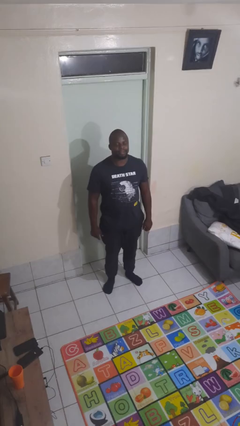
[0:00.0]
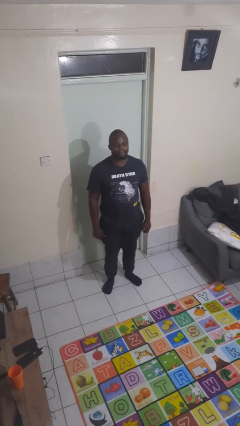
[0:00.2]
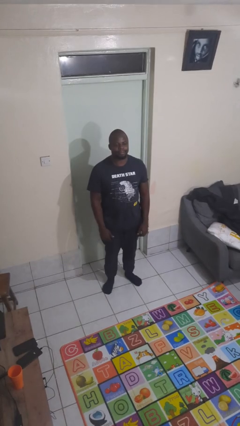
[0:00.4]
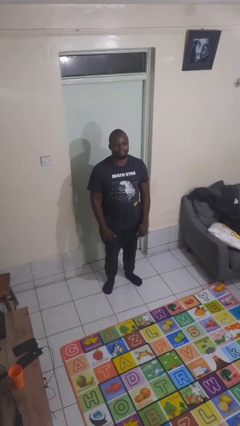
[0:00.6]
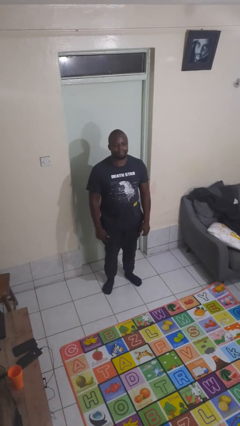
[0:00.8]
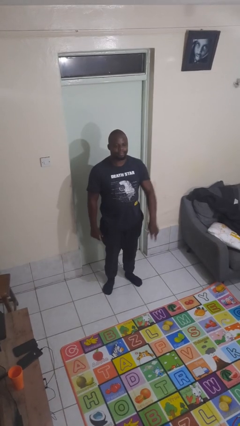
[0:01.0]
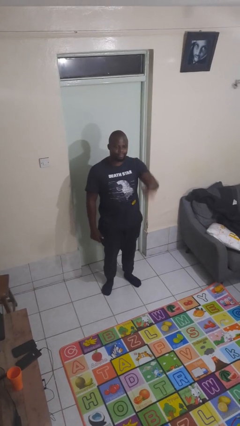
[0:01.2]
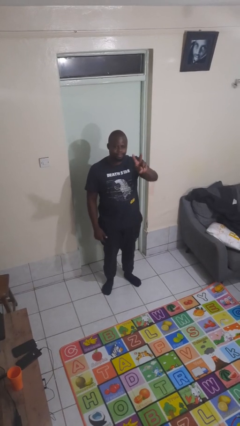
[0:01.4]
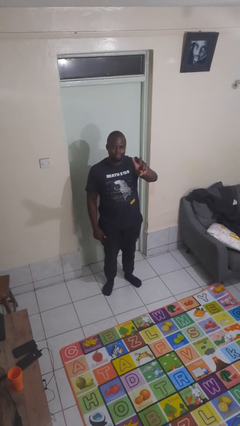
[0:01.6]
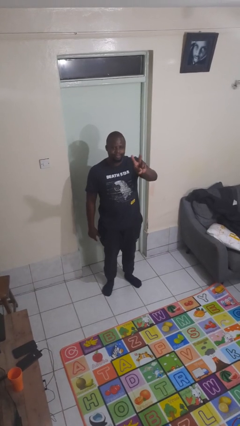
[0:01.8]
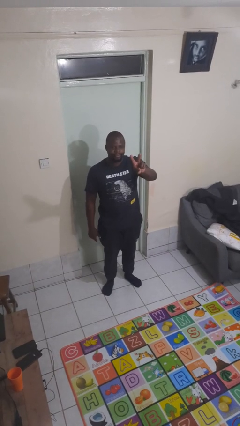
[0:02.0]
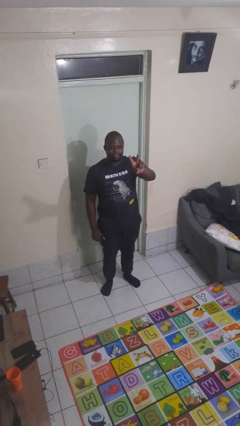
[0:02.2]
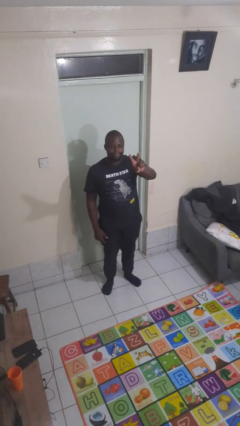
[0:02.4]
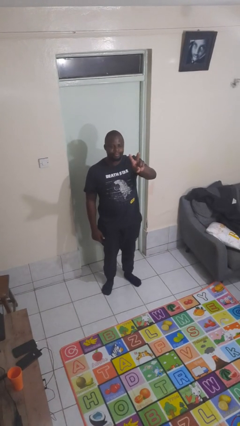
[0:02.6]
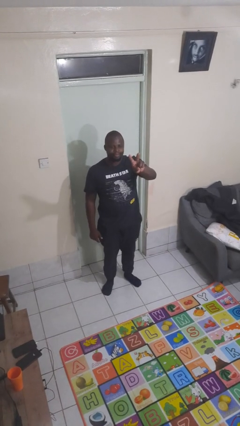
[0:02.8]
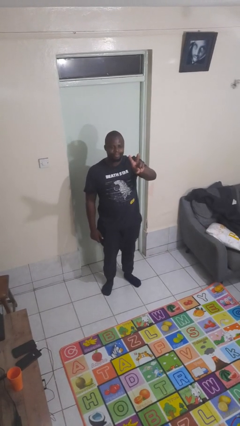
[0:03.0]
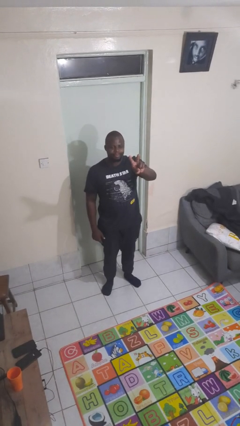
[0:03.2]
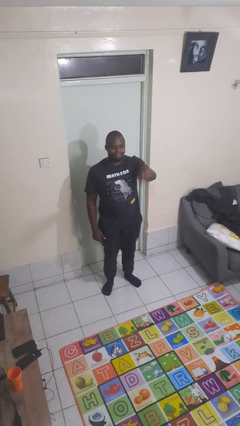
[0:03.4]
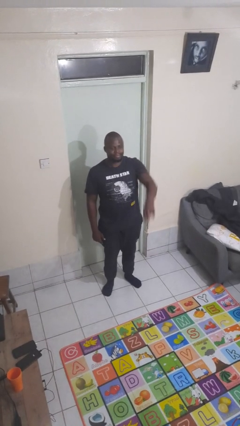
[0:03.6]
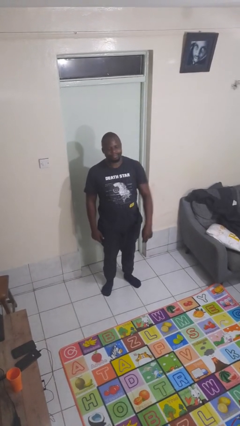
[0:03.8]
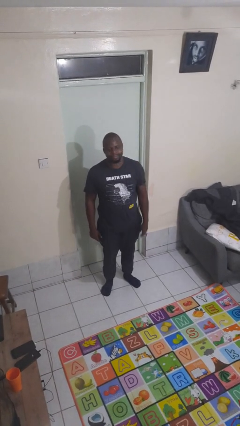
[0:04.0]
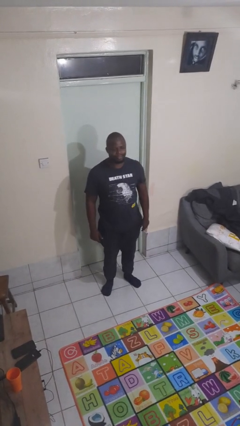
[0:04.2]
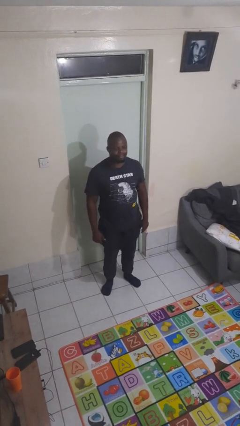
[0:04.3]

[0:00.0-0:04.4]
person gestures peace

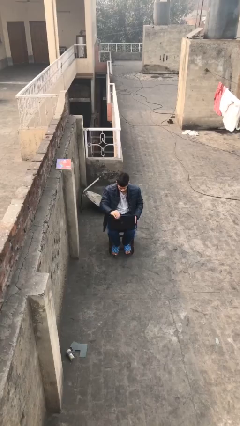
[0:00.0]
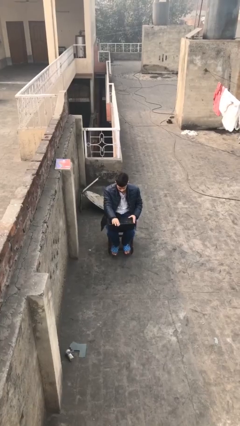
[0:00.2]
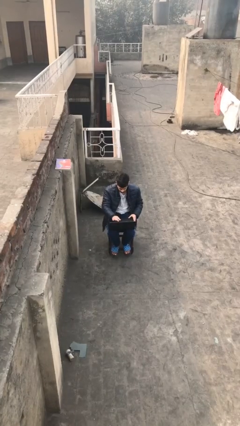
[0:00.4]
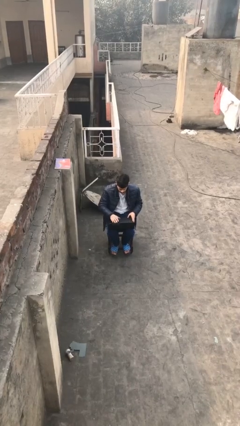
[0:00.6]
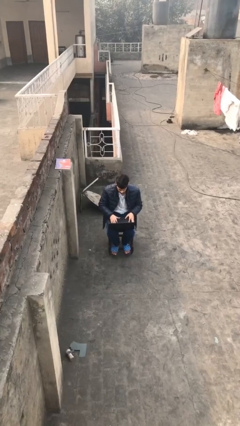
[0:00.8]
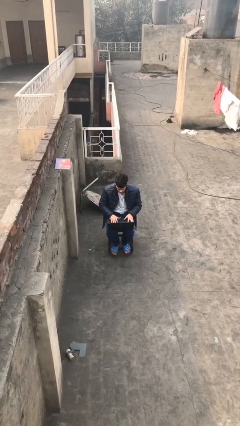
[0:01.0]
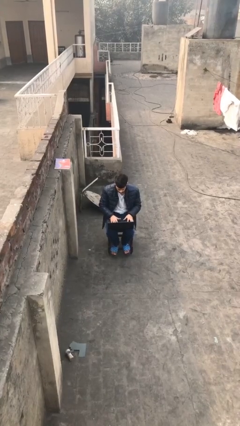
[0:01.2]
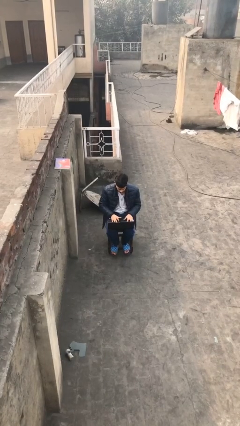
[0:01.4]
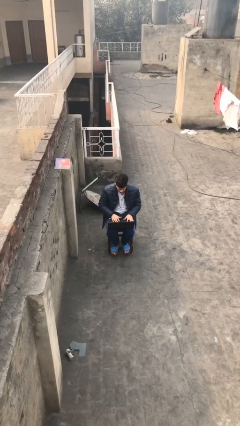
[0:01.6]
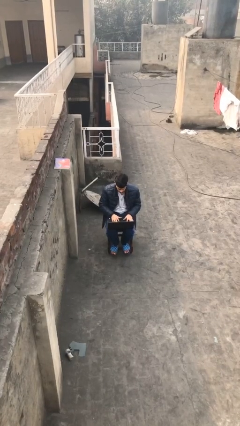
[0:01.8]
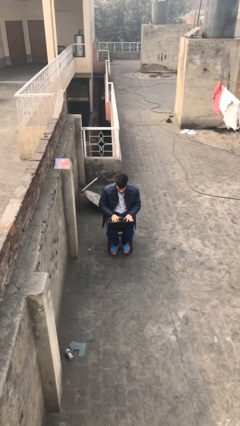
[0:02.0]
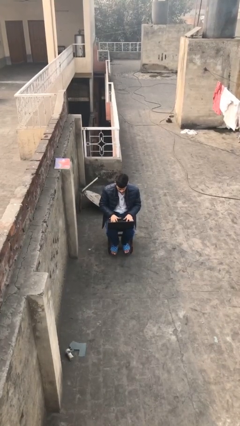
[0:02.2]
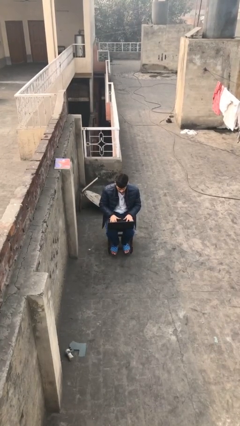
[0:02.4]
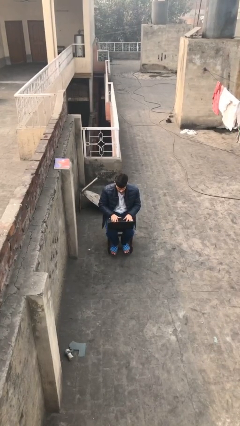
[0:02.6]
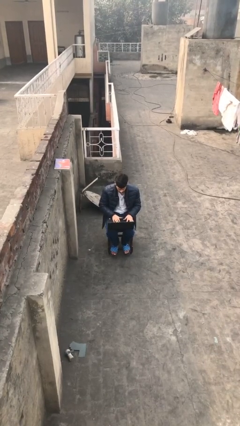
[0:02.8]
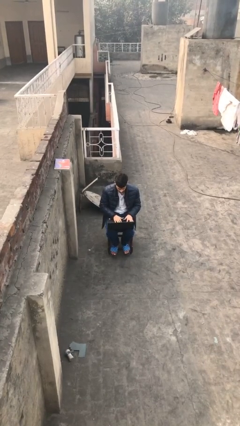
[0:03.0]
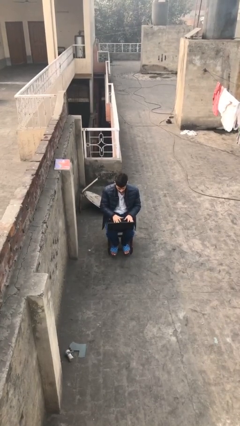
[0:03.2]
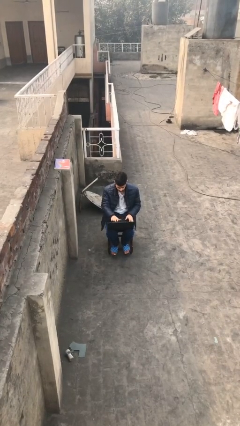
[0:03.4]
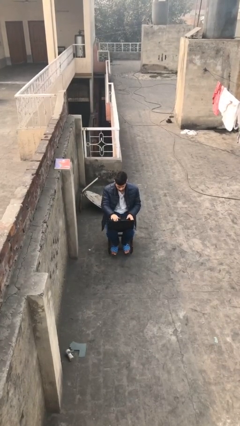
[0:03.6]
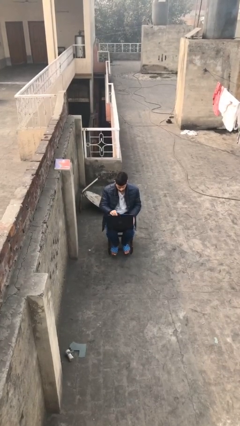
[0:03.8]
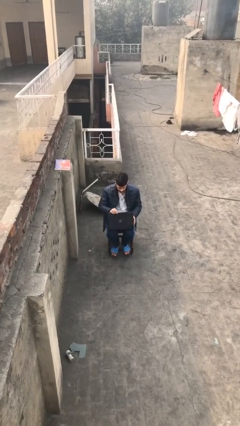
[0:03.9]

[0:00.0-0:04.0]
person interacts with laptop

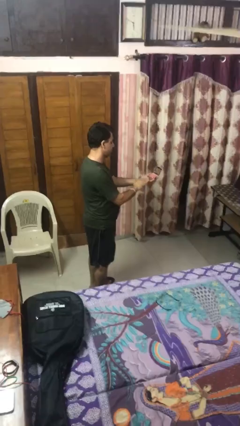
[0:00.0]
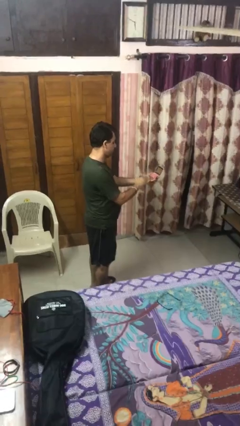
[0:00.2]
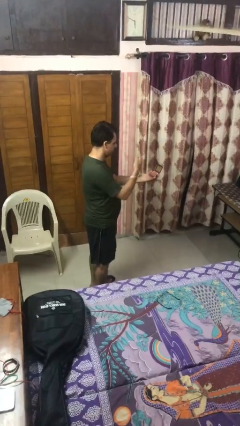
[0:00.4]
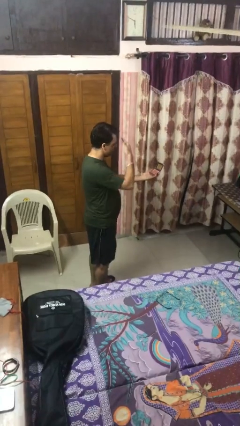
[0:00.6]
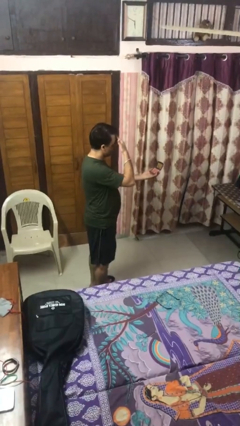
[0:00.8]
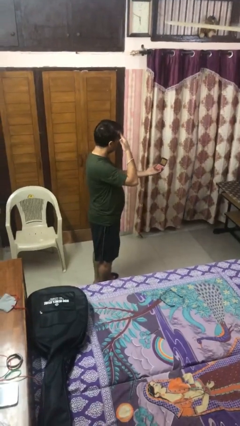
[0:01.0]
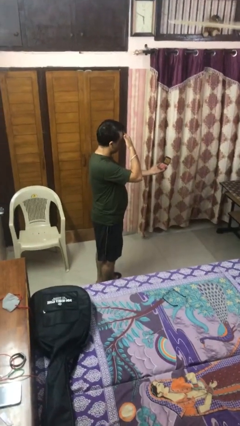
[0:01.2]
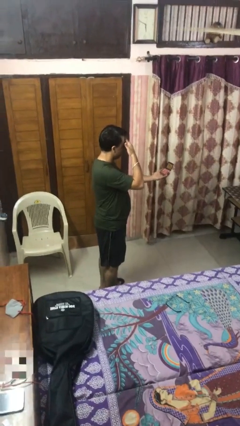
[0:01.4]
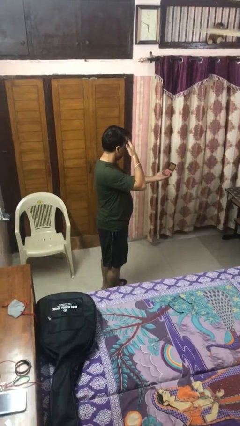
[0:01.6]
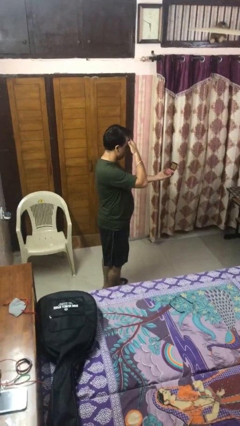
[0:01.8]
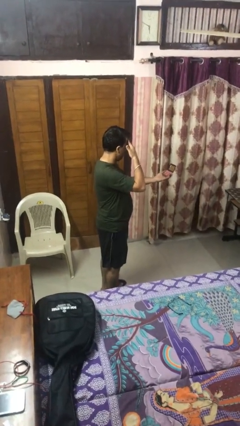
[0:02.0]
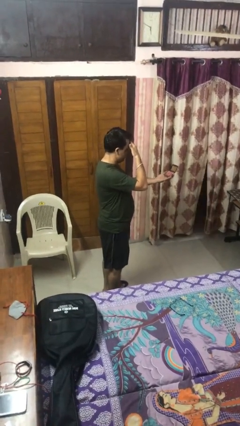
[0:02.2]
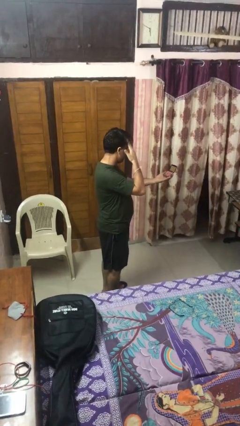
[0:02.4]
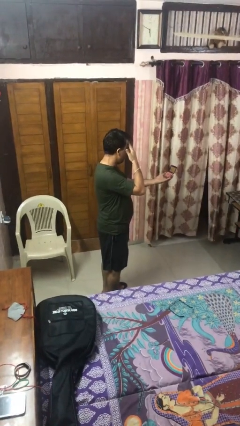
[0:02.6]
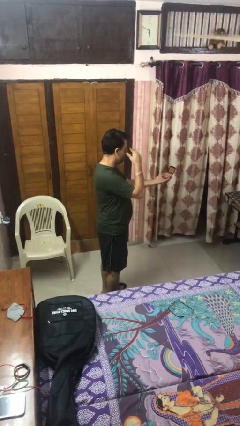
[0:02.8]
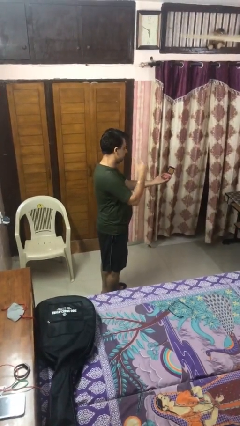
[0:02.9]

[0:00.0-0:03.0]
person applies foundation makeup

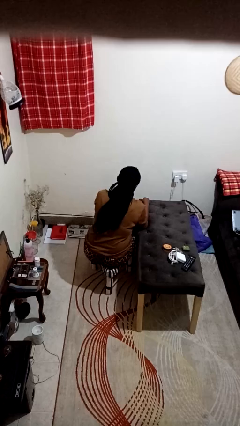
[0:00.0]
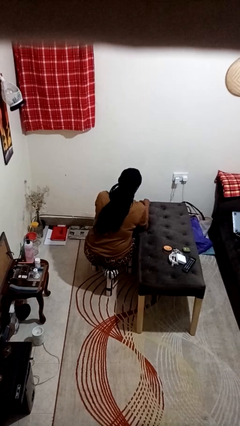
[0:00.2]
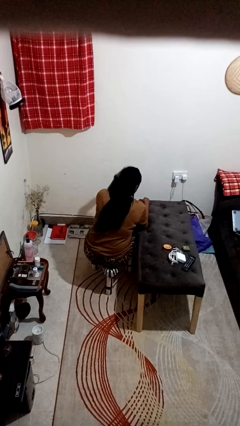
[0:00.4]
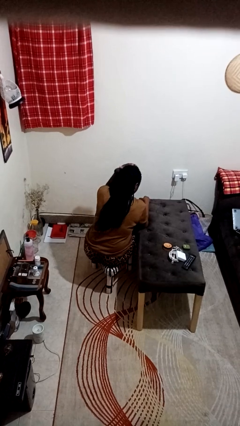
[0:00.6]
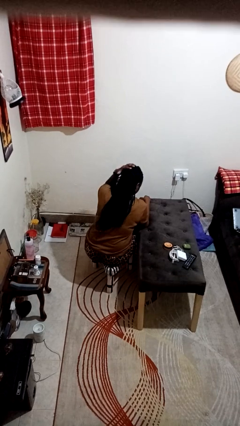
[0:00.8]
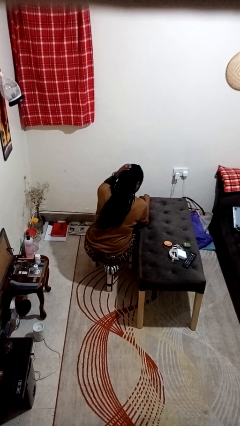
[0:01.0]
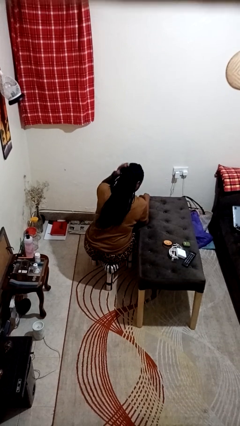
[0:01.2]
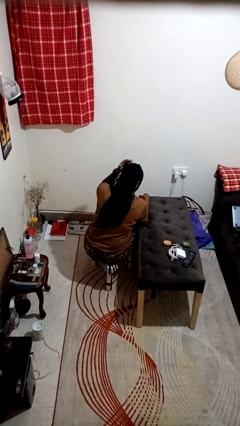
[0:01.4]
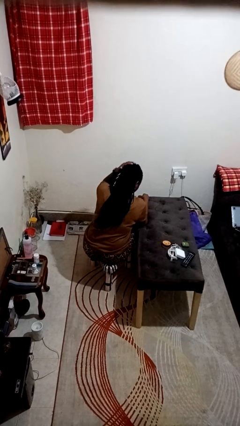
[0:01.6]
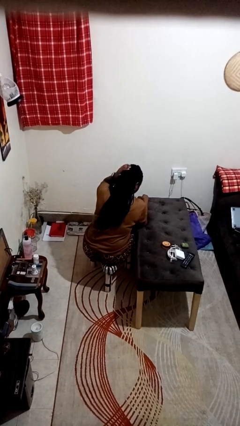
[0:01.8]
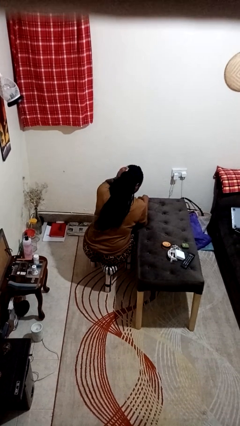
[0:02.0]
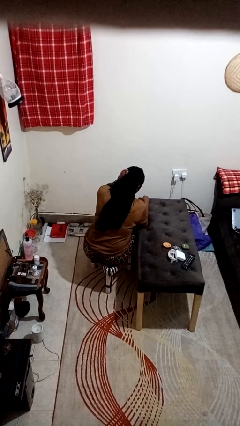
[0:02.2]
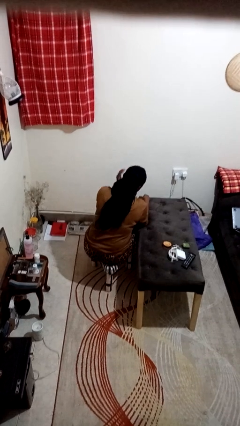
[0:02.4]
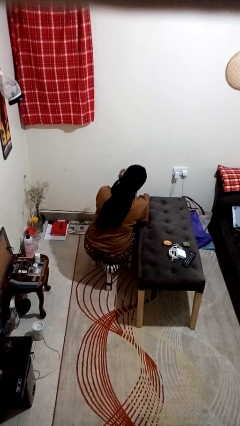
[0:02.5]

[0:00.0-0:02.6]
person strokes hair

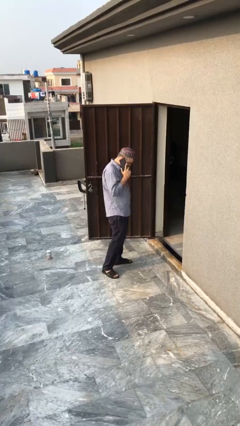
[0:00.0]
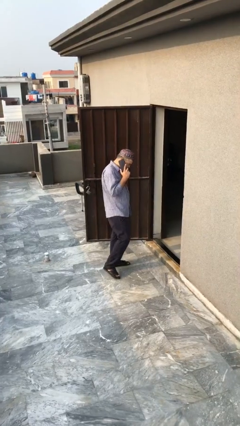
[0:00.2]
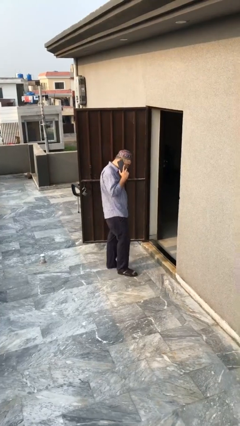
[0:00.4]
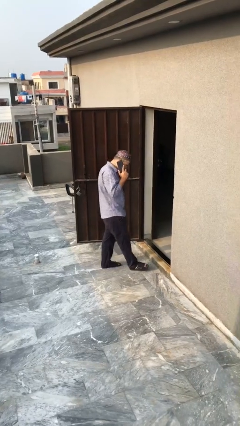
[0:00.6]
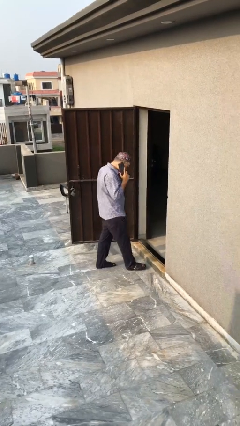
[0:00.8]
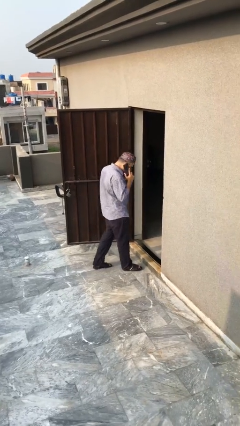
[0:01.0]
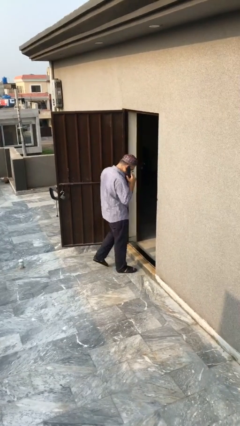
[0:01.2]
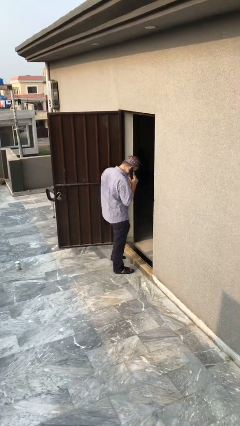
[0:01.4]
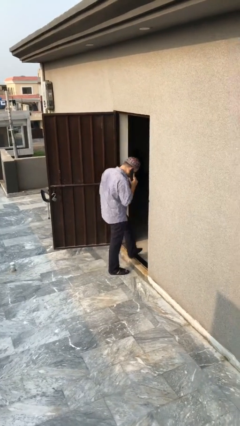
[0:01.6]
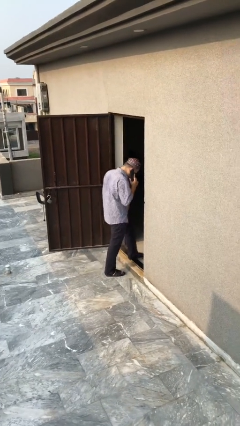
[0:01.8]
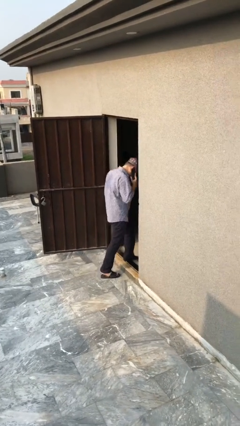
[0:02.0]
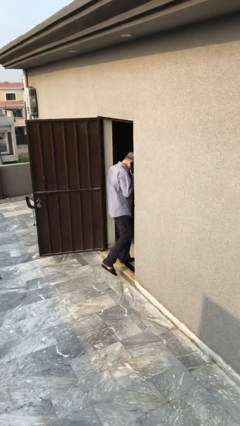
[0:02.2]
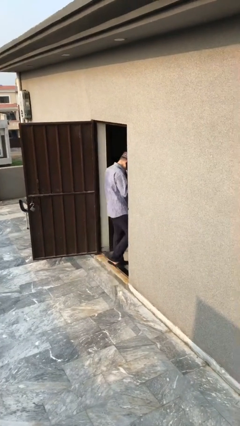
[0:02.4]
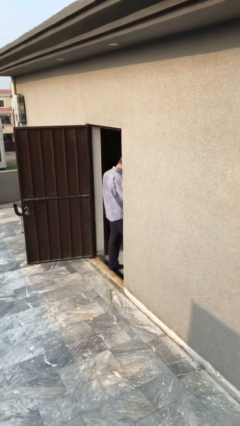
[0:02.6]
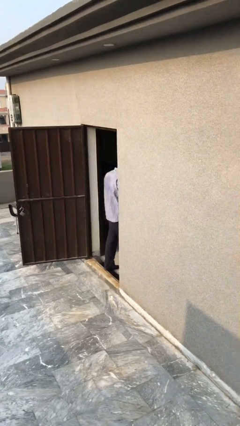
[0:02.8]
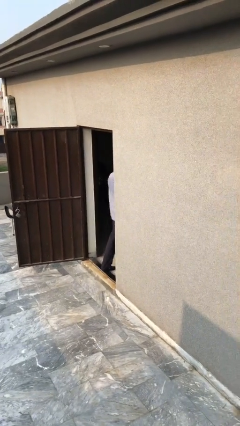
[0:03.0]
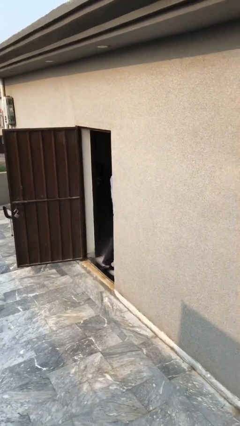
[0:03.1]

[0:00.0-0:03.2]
person exits scene through structure

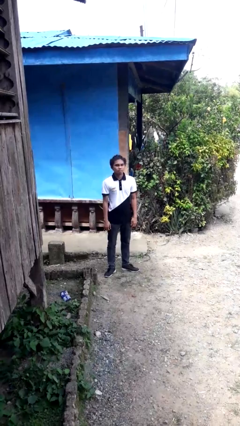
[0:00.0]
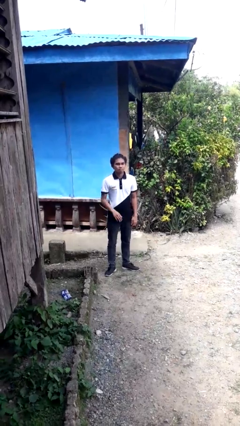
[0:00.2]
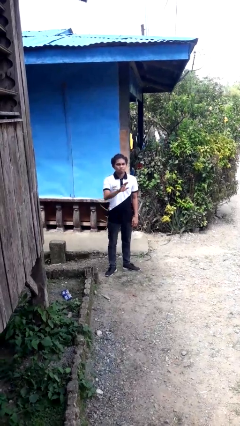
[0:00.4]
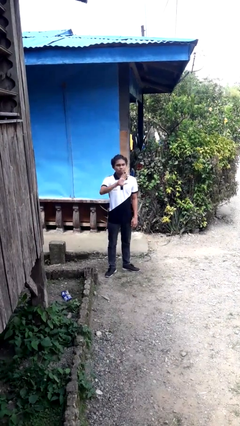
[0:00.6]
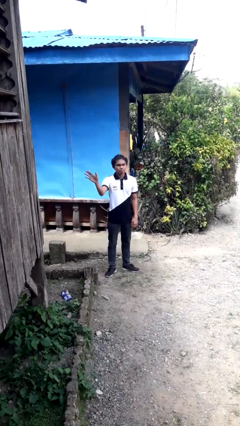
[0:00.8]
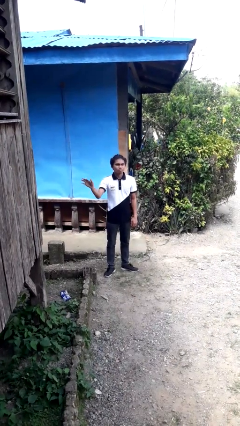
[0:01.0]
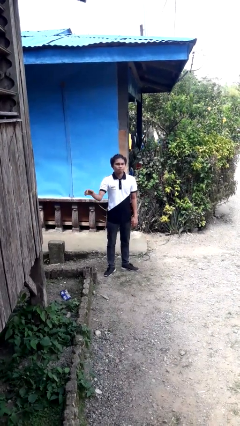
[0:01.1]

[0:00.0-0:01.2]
person gestures swipe right
